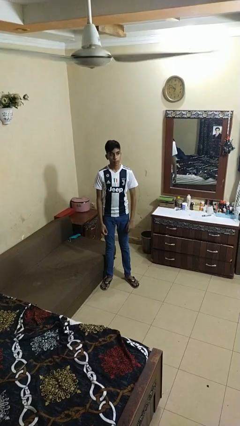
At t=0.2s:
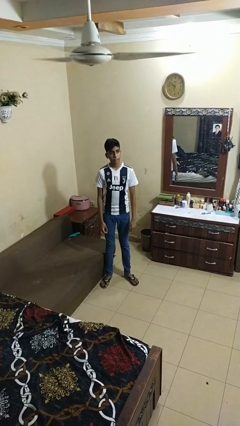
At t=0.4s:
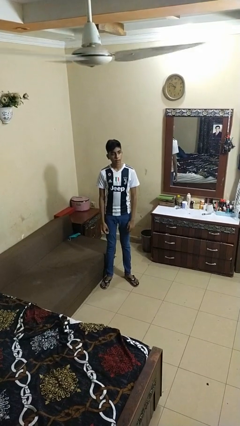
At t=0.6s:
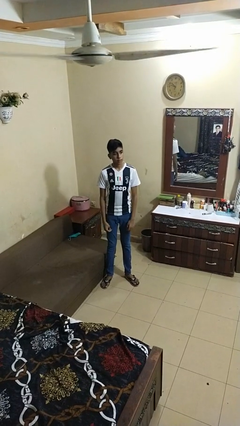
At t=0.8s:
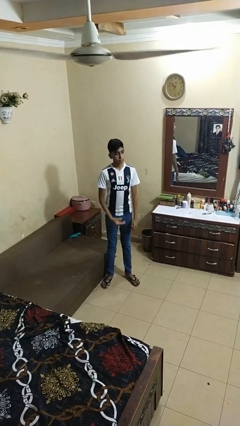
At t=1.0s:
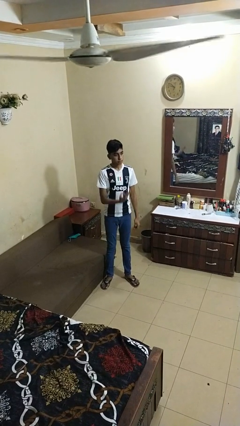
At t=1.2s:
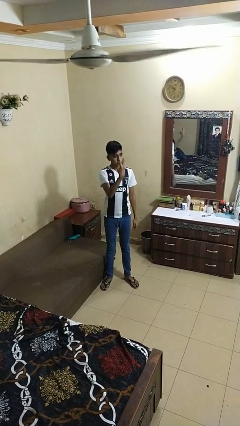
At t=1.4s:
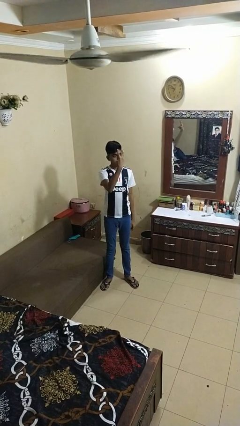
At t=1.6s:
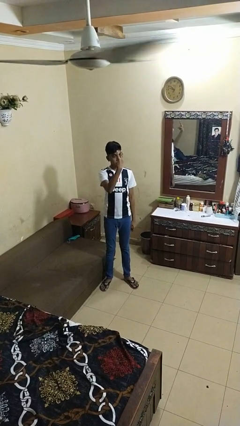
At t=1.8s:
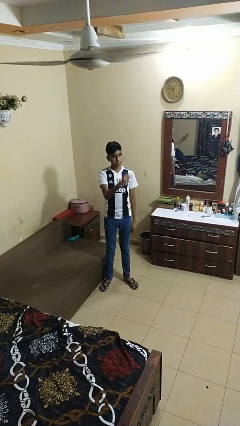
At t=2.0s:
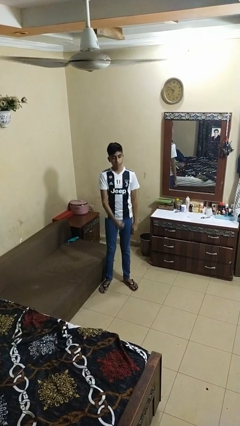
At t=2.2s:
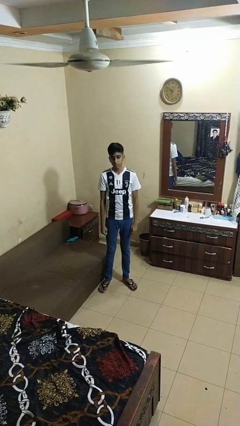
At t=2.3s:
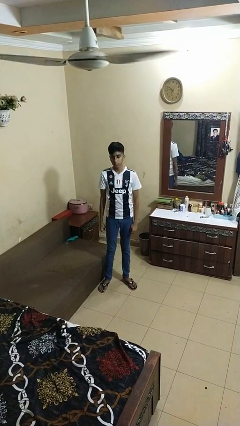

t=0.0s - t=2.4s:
person gestures number three

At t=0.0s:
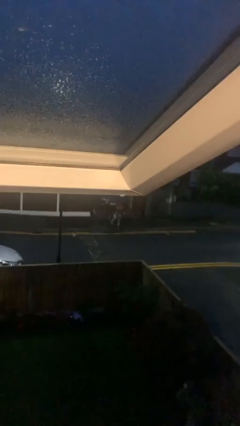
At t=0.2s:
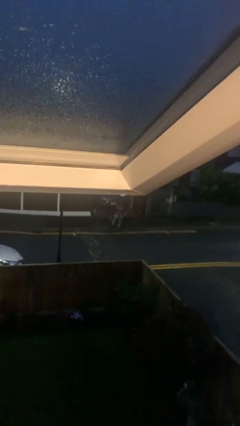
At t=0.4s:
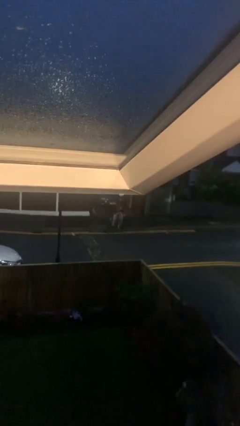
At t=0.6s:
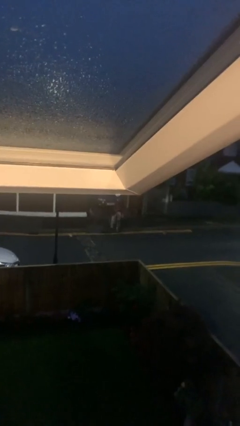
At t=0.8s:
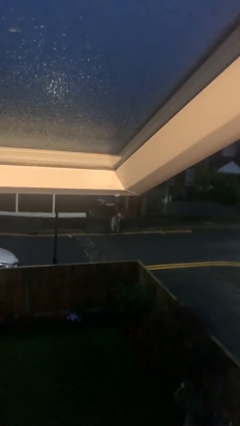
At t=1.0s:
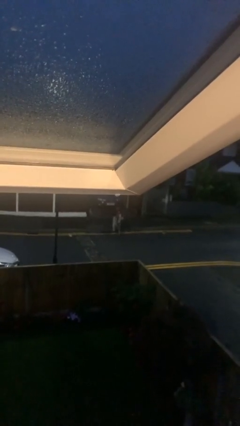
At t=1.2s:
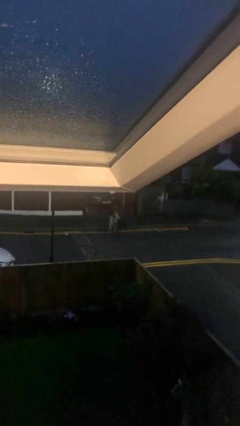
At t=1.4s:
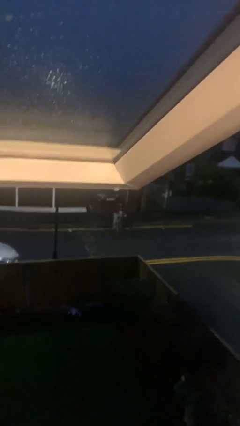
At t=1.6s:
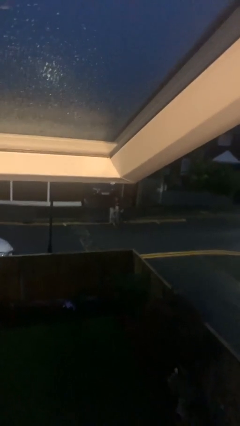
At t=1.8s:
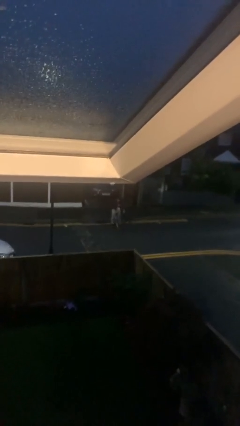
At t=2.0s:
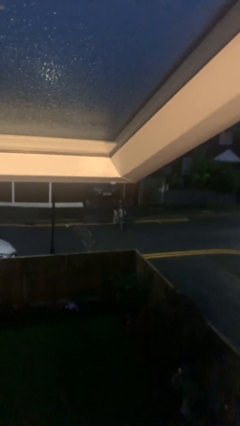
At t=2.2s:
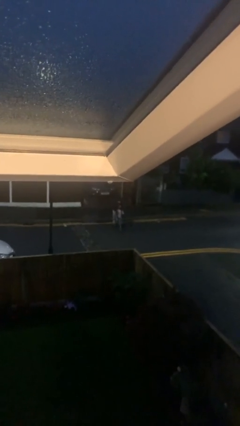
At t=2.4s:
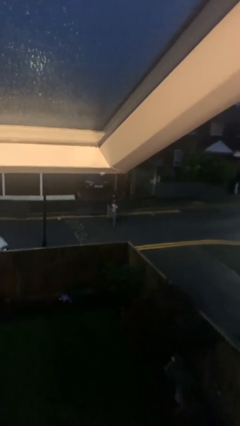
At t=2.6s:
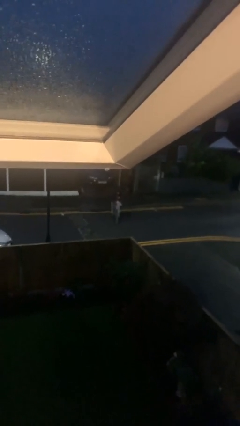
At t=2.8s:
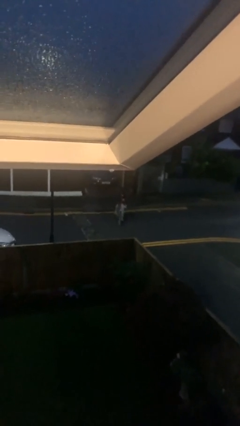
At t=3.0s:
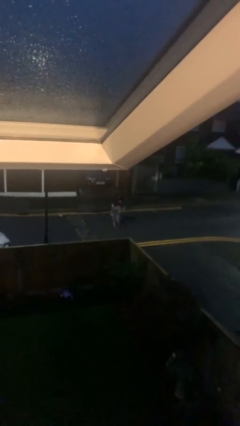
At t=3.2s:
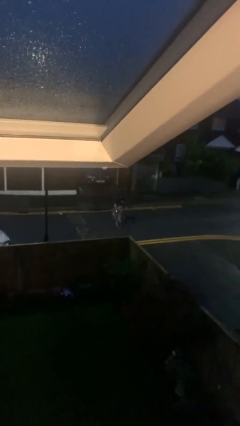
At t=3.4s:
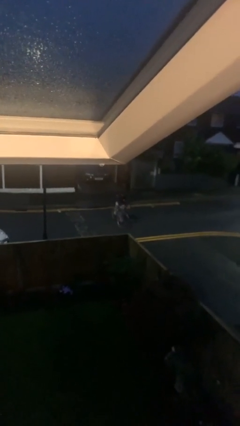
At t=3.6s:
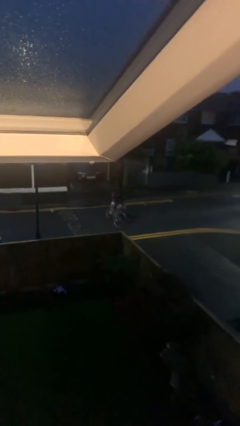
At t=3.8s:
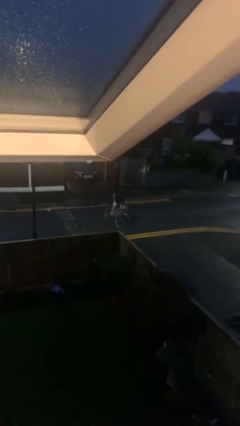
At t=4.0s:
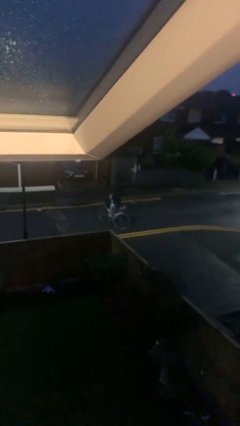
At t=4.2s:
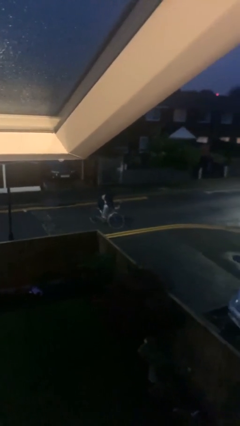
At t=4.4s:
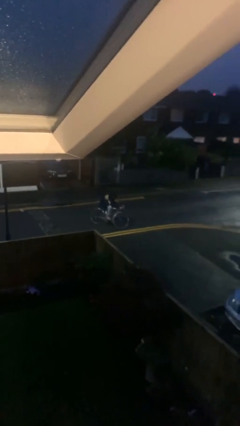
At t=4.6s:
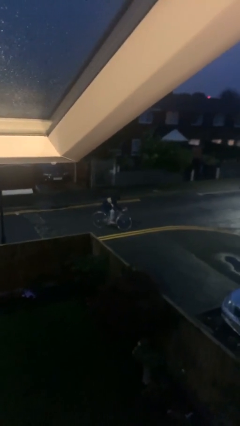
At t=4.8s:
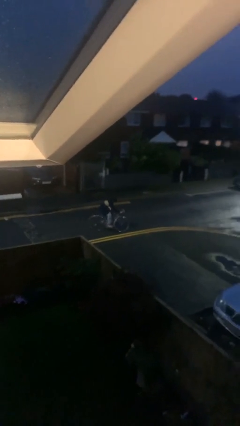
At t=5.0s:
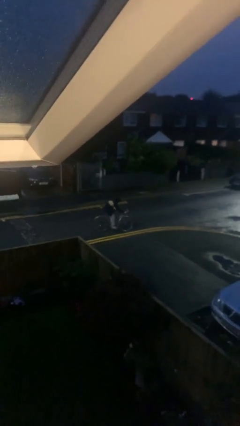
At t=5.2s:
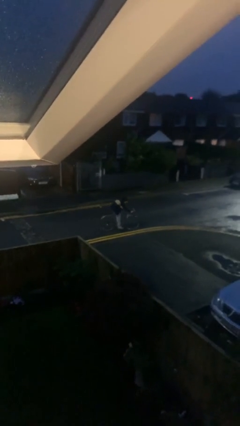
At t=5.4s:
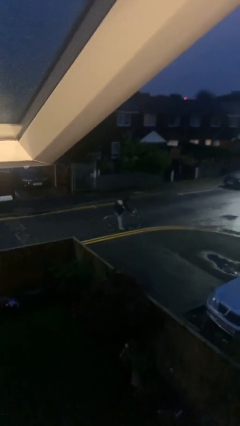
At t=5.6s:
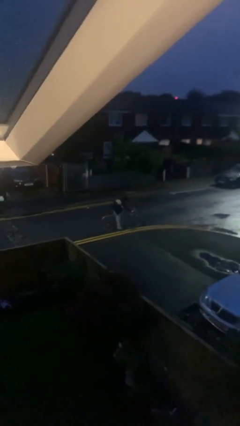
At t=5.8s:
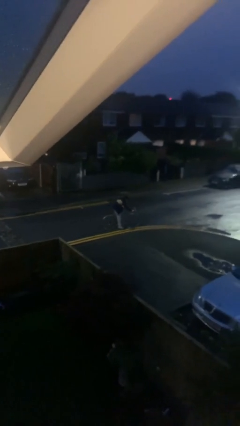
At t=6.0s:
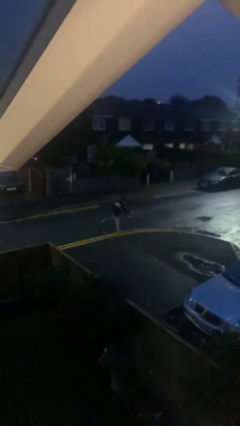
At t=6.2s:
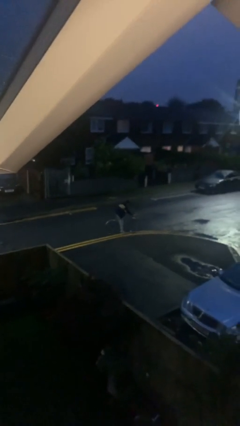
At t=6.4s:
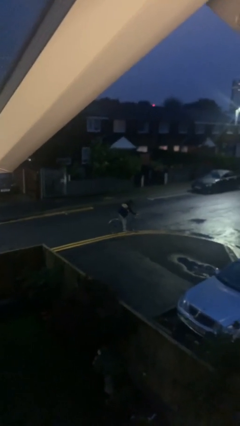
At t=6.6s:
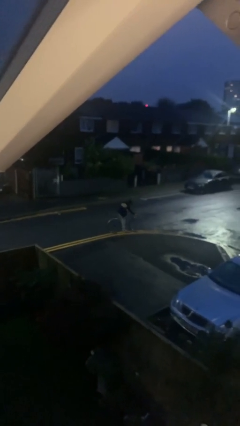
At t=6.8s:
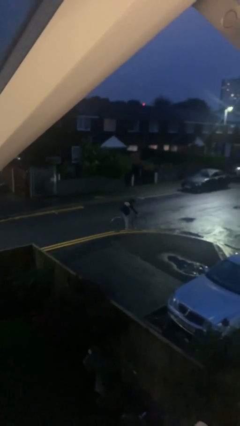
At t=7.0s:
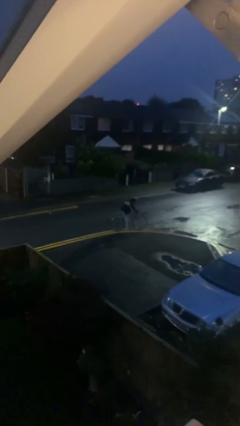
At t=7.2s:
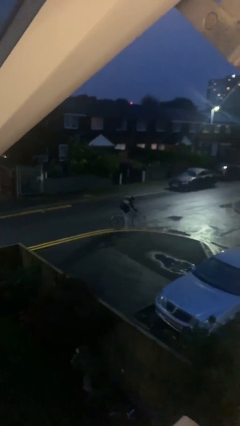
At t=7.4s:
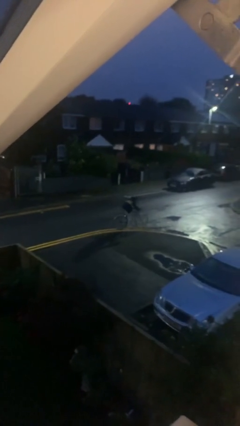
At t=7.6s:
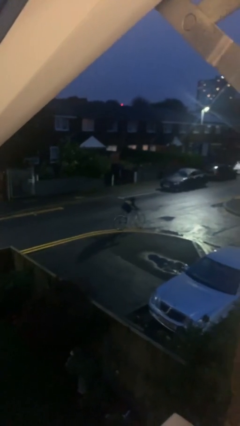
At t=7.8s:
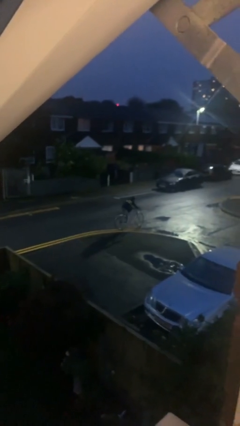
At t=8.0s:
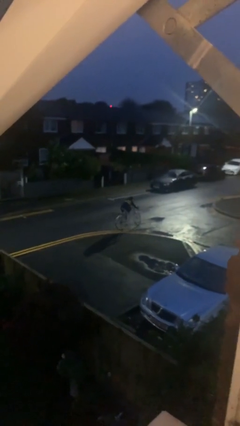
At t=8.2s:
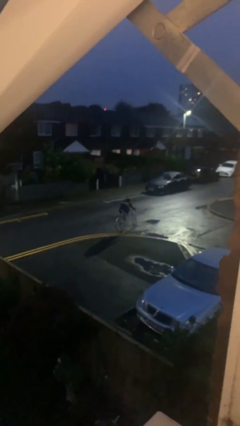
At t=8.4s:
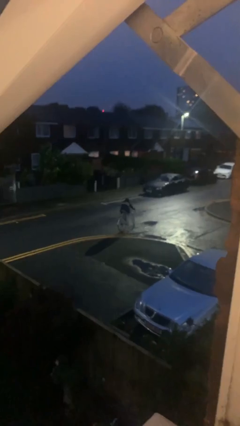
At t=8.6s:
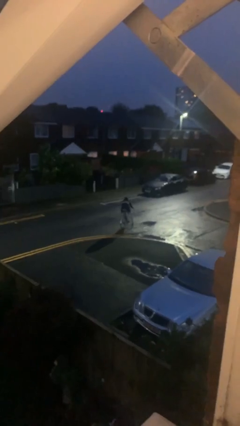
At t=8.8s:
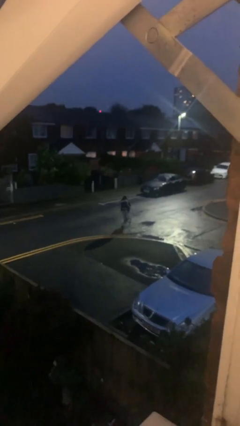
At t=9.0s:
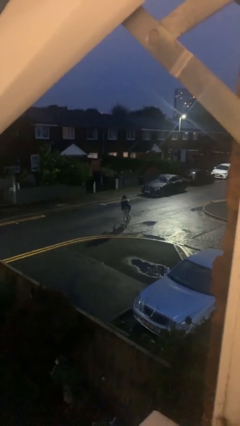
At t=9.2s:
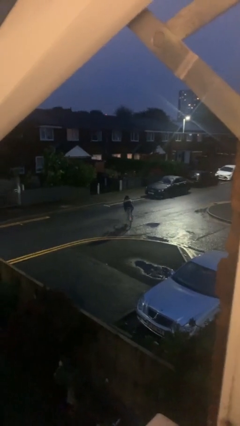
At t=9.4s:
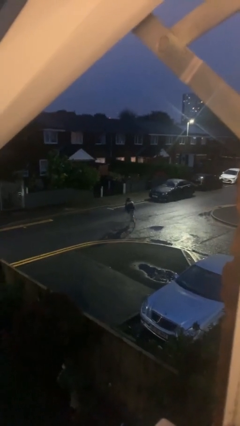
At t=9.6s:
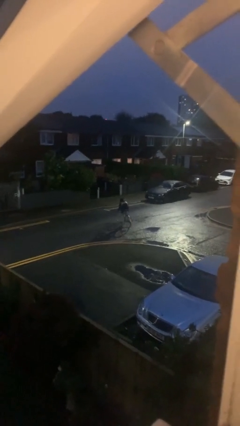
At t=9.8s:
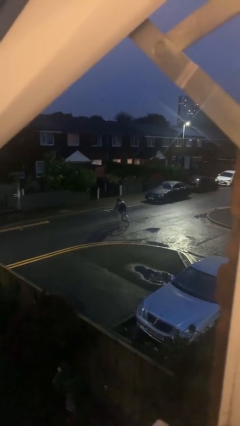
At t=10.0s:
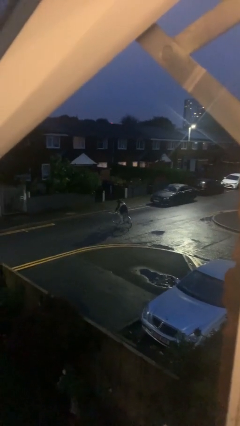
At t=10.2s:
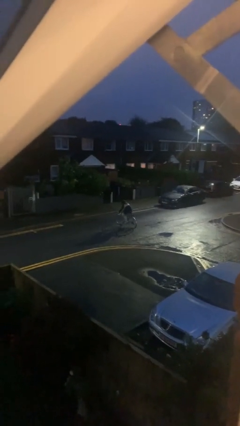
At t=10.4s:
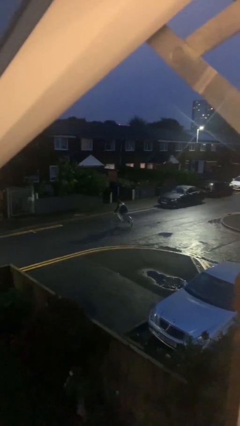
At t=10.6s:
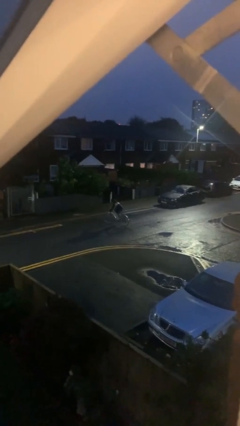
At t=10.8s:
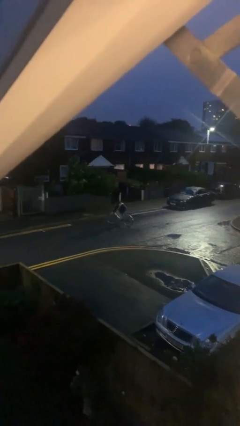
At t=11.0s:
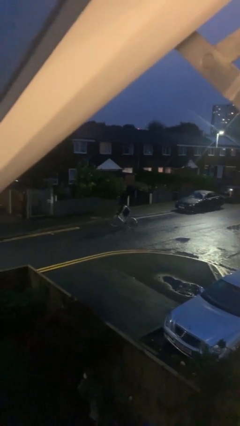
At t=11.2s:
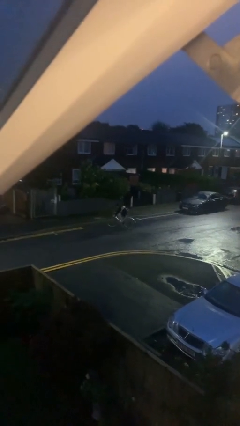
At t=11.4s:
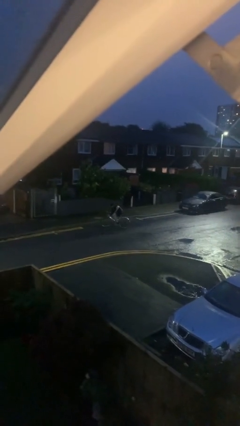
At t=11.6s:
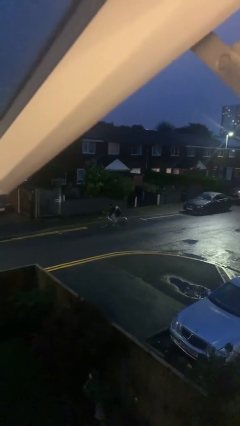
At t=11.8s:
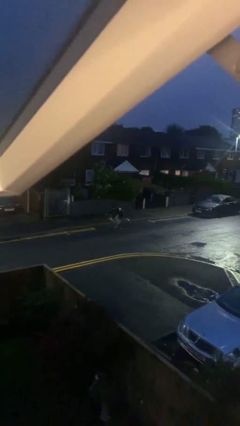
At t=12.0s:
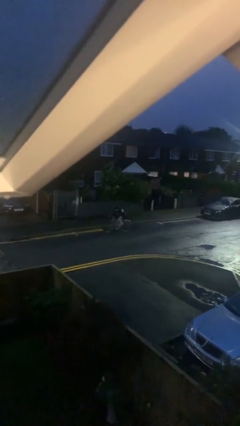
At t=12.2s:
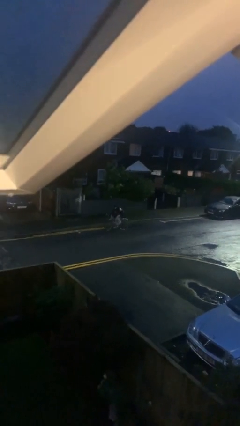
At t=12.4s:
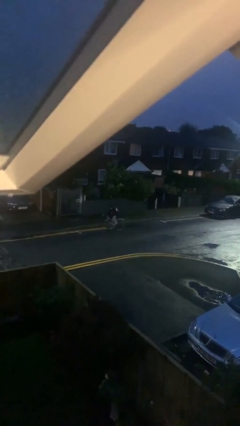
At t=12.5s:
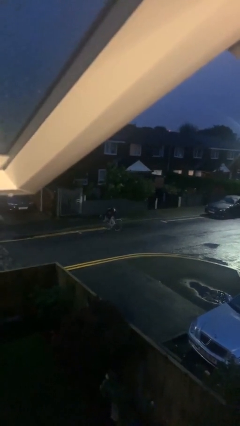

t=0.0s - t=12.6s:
person rides bicycle

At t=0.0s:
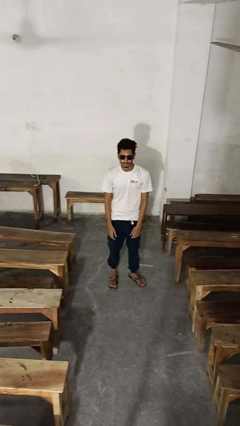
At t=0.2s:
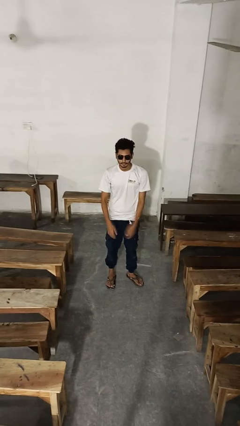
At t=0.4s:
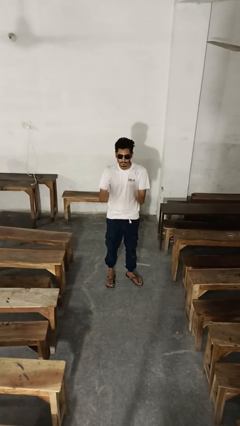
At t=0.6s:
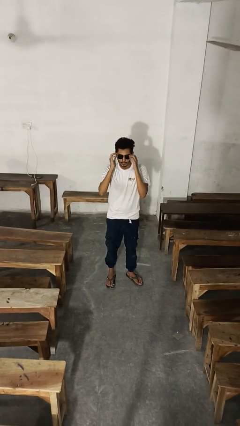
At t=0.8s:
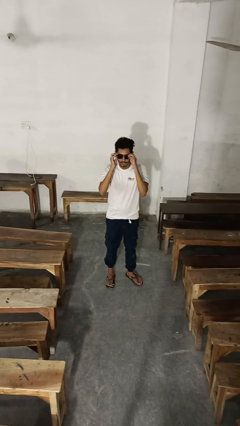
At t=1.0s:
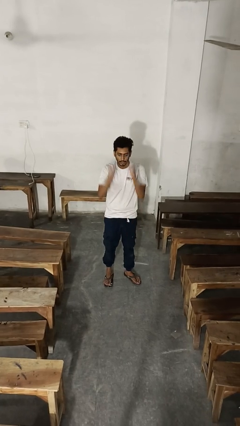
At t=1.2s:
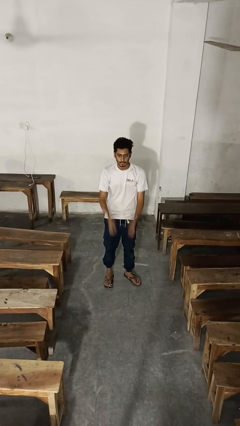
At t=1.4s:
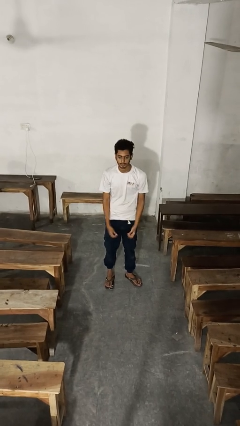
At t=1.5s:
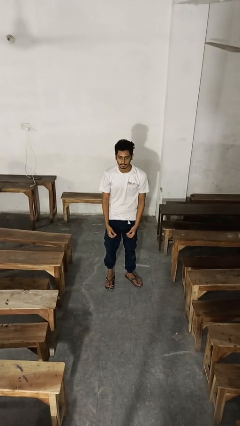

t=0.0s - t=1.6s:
person takes off sunglasses

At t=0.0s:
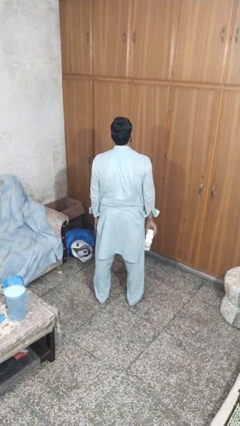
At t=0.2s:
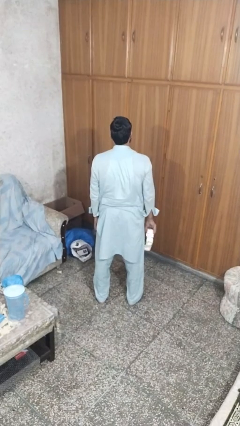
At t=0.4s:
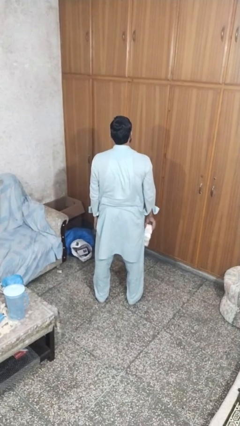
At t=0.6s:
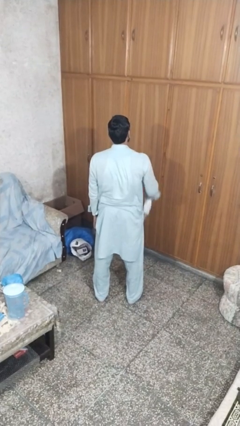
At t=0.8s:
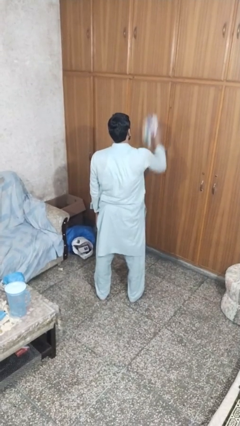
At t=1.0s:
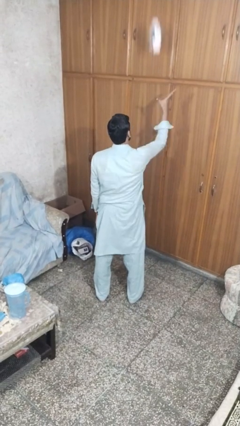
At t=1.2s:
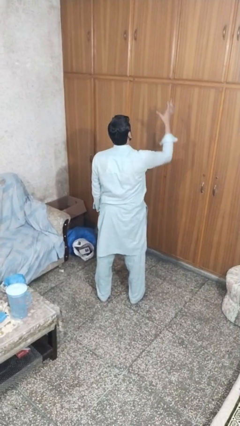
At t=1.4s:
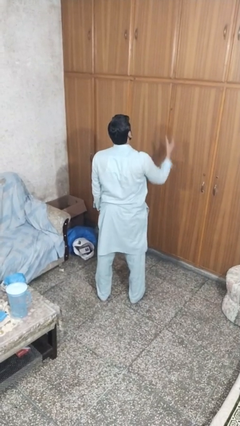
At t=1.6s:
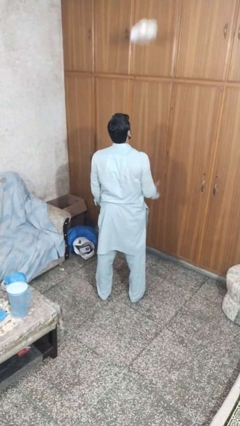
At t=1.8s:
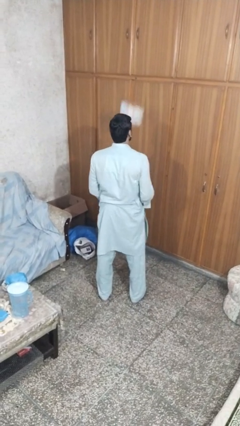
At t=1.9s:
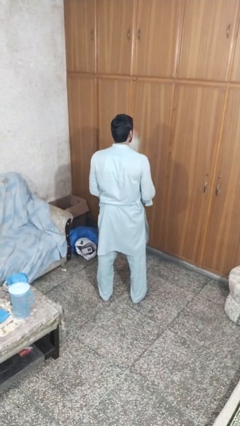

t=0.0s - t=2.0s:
person drops object
